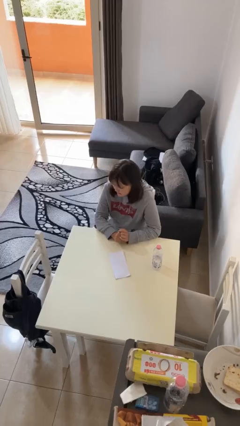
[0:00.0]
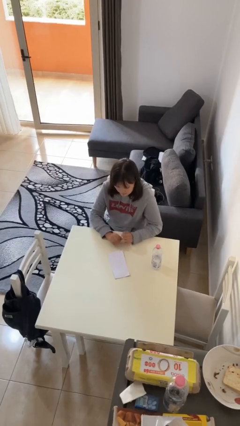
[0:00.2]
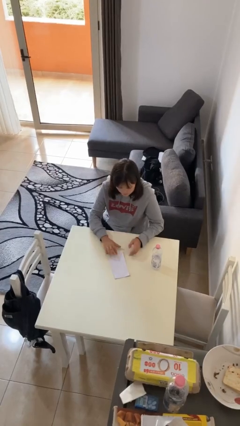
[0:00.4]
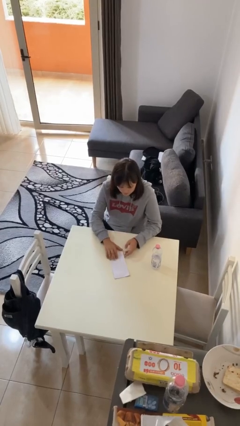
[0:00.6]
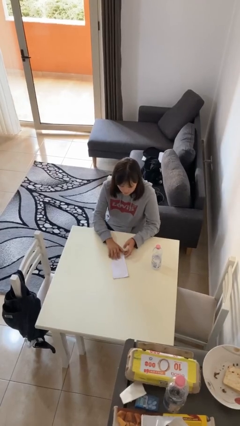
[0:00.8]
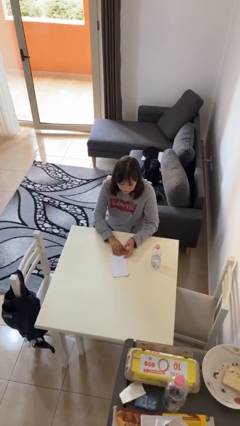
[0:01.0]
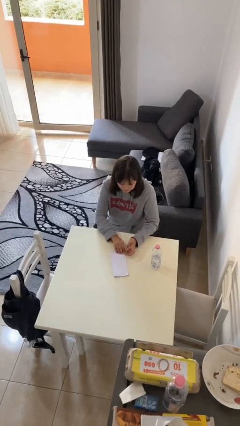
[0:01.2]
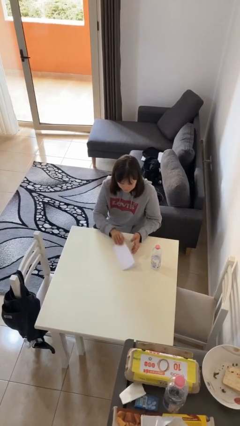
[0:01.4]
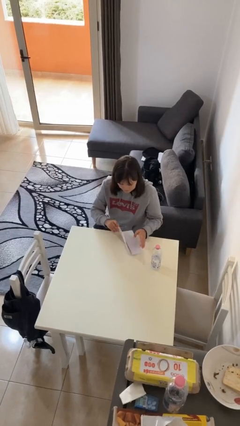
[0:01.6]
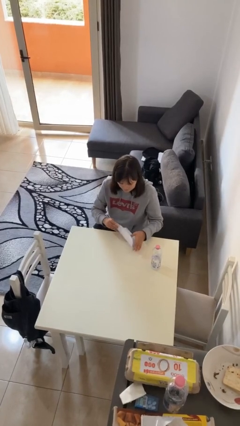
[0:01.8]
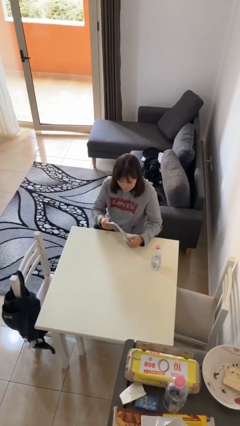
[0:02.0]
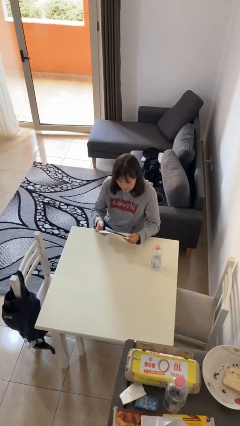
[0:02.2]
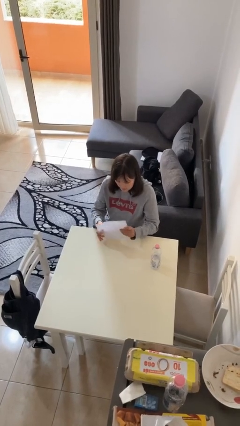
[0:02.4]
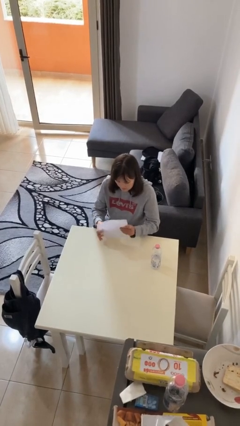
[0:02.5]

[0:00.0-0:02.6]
person picks up object from table

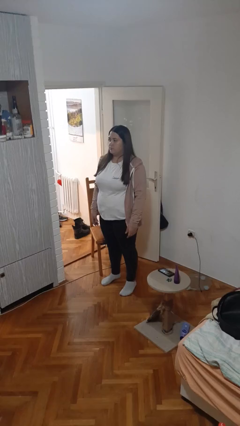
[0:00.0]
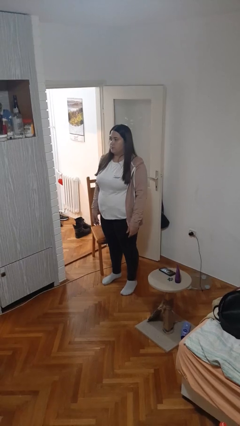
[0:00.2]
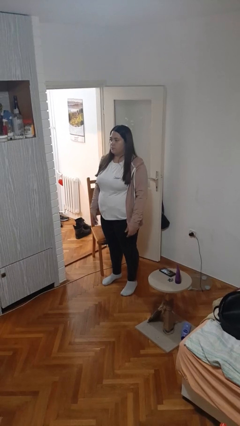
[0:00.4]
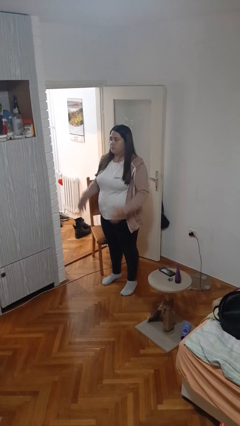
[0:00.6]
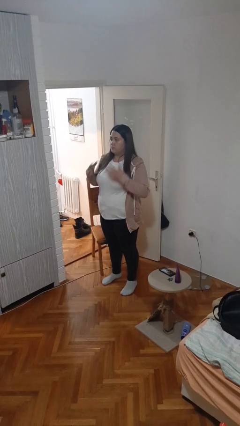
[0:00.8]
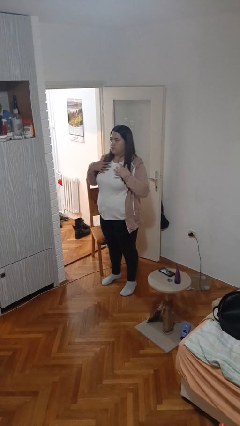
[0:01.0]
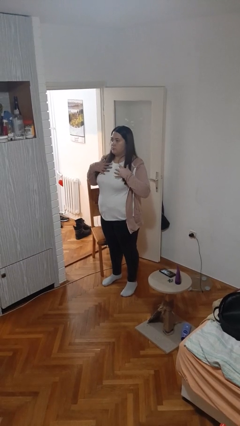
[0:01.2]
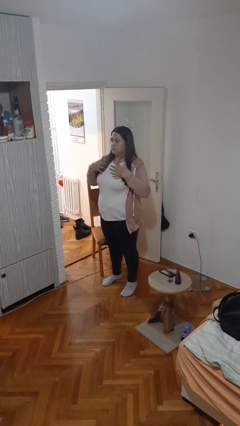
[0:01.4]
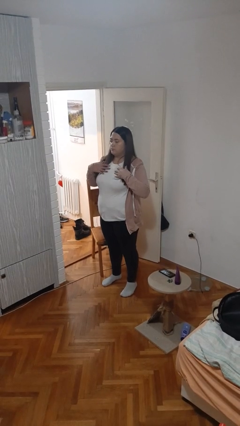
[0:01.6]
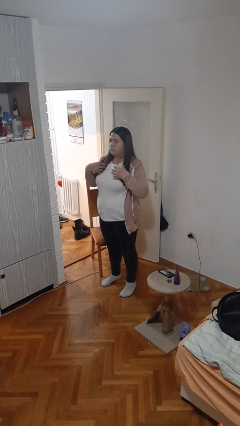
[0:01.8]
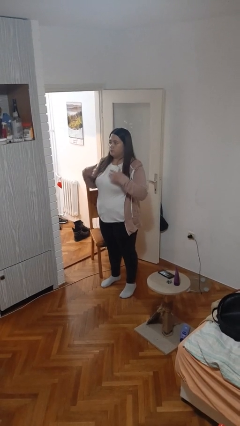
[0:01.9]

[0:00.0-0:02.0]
person drums on chest

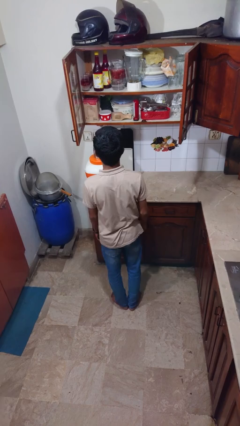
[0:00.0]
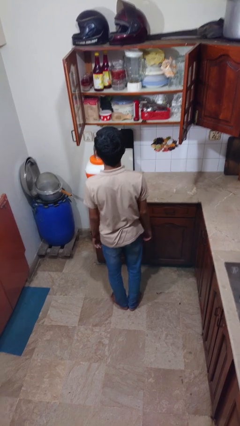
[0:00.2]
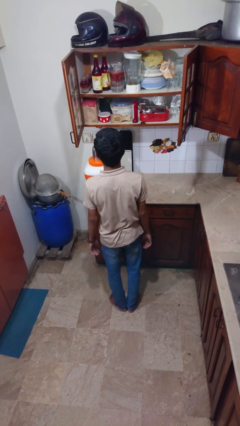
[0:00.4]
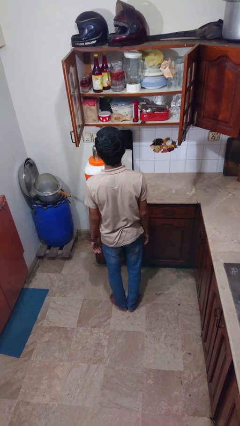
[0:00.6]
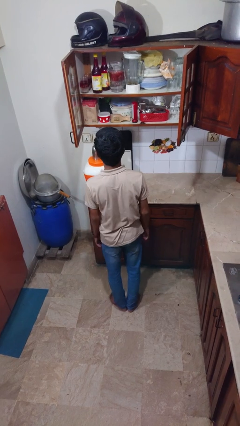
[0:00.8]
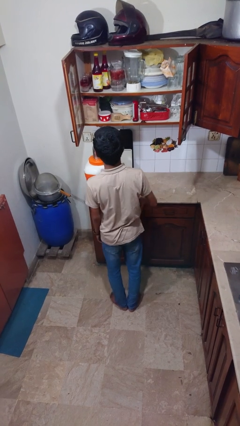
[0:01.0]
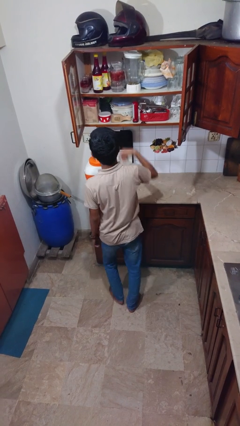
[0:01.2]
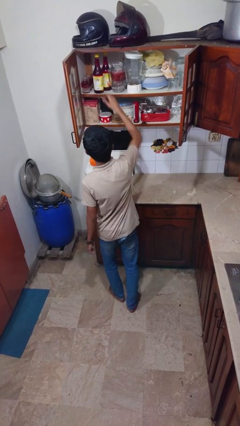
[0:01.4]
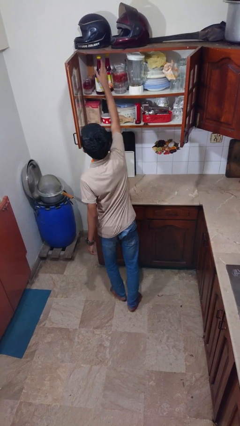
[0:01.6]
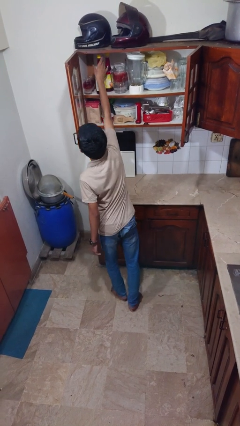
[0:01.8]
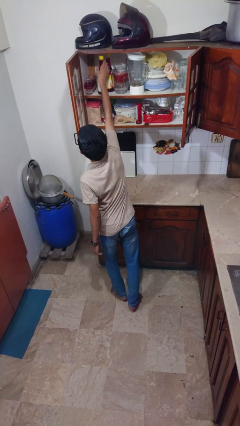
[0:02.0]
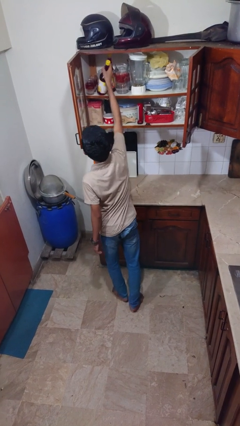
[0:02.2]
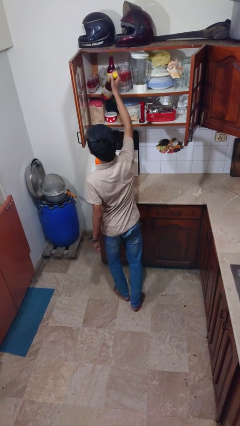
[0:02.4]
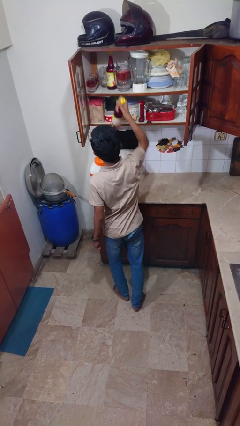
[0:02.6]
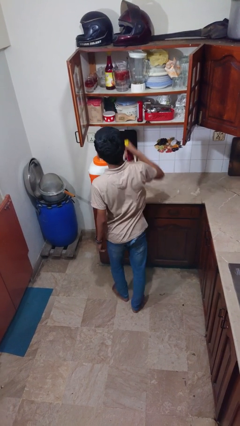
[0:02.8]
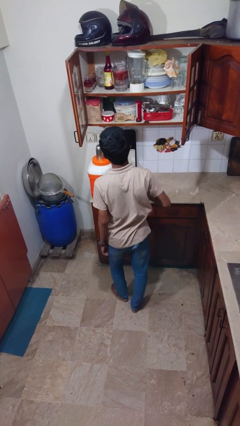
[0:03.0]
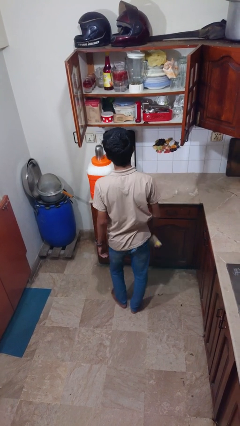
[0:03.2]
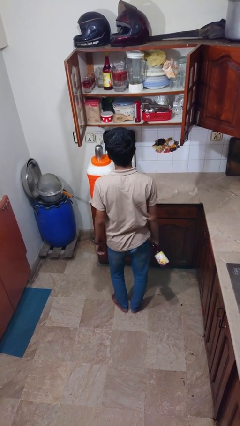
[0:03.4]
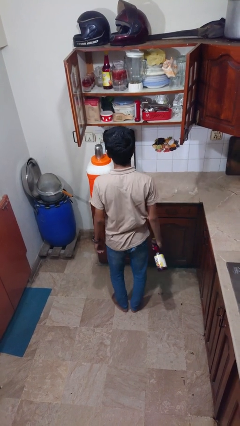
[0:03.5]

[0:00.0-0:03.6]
person picks up object from cabinet

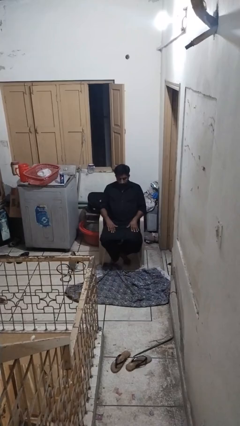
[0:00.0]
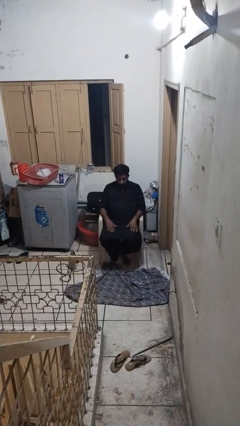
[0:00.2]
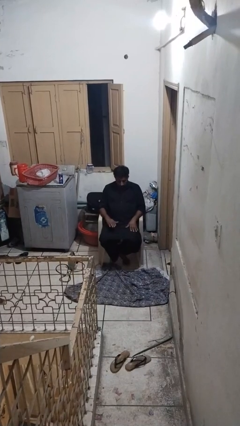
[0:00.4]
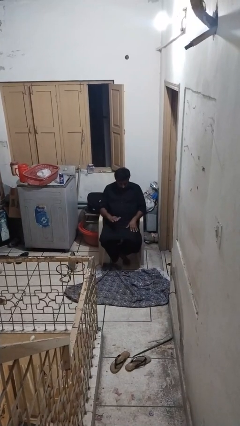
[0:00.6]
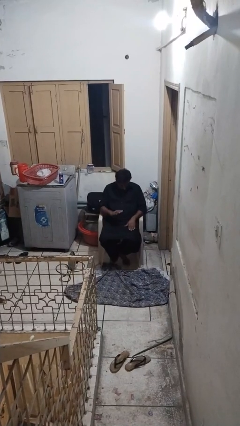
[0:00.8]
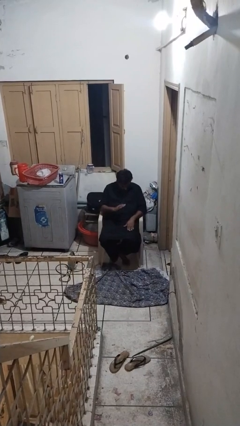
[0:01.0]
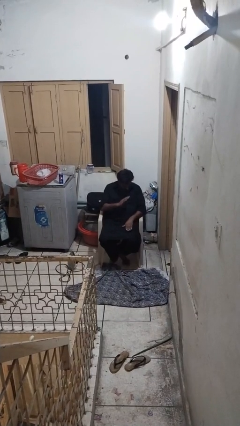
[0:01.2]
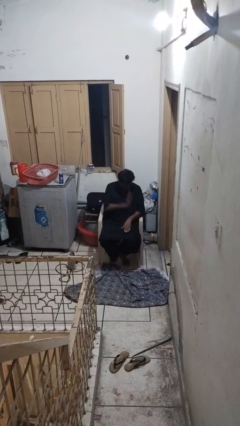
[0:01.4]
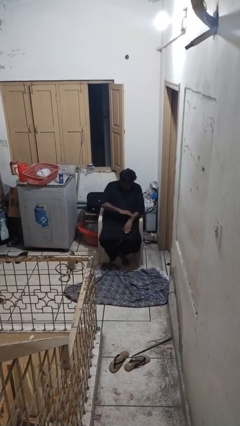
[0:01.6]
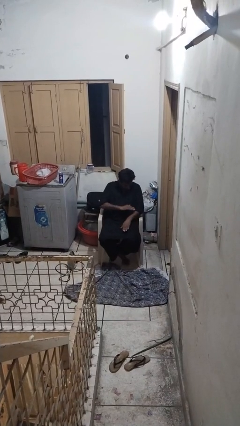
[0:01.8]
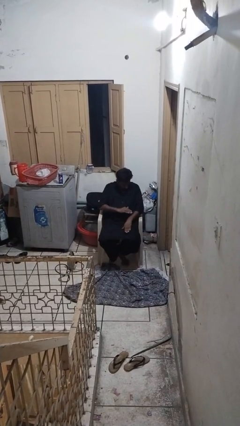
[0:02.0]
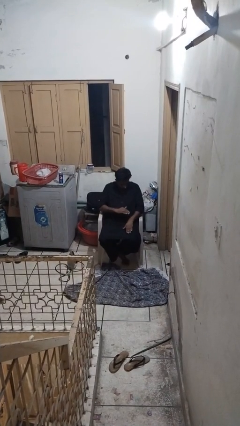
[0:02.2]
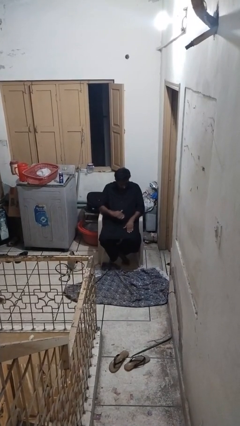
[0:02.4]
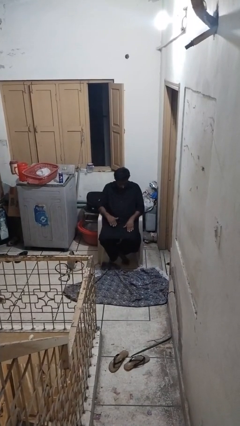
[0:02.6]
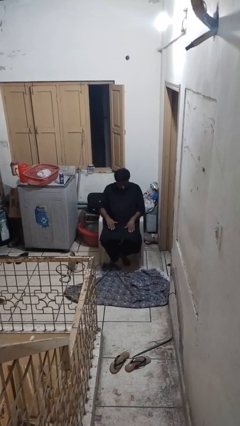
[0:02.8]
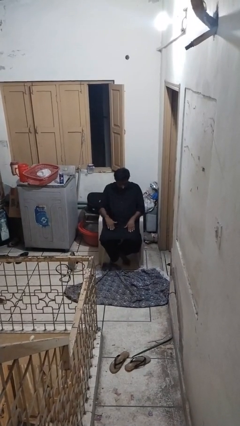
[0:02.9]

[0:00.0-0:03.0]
person swats bug

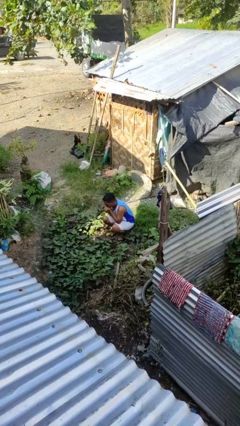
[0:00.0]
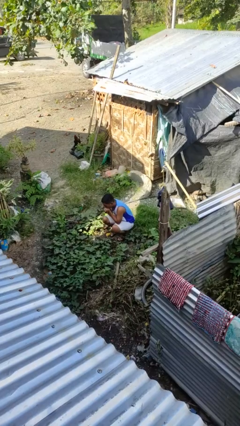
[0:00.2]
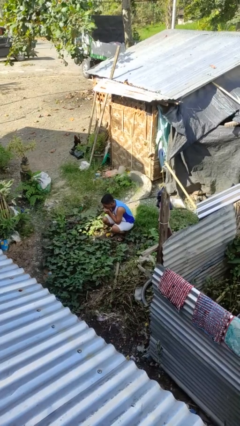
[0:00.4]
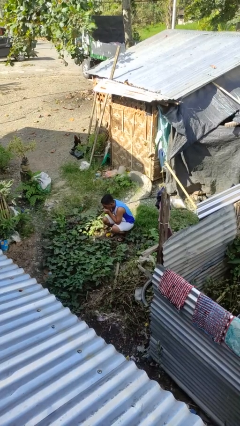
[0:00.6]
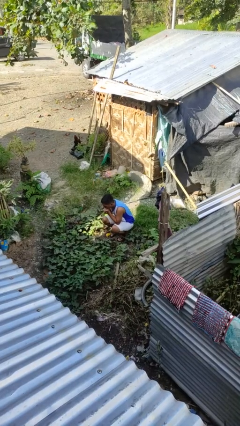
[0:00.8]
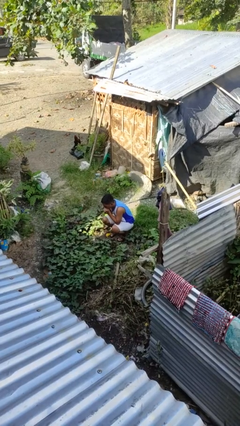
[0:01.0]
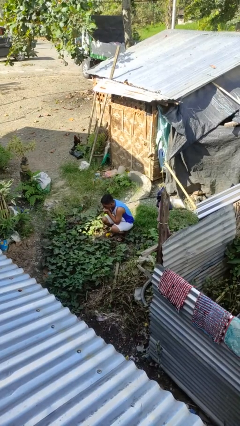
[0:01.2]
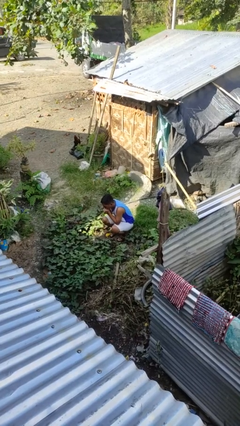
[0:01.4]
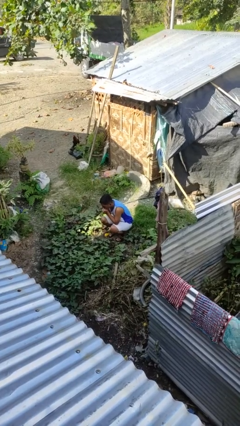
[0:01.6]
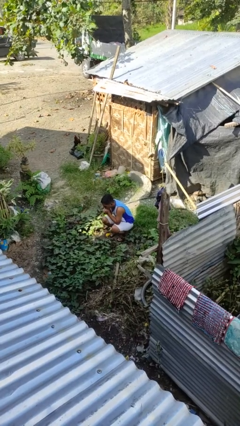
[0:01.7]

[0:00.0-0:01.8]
person blows into hands

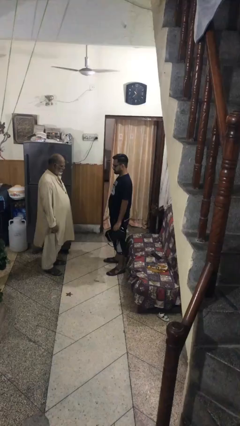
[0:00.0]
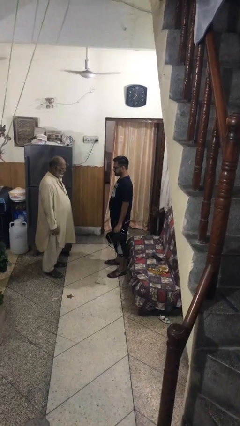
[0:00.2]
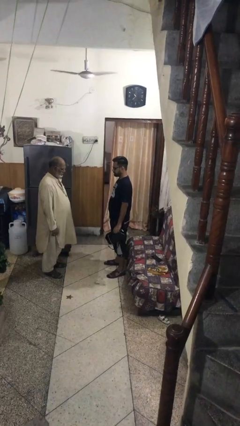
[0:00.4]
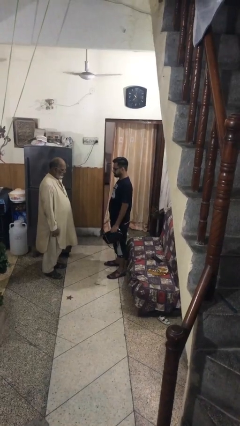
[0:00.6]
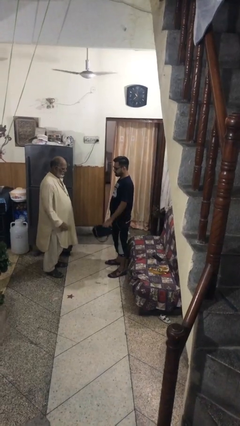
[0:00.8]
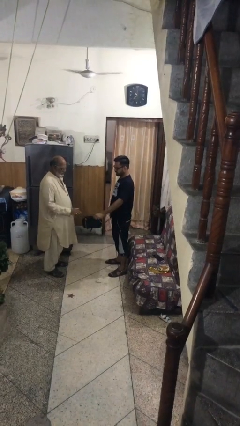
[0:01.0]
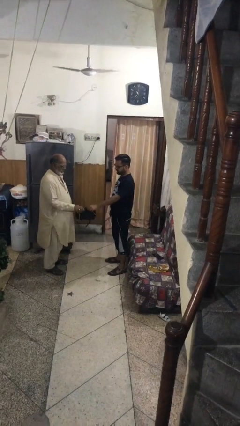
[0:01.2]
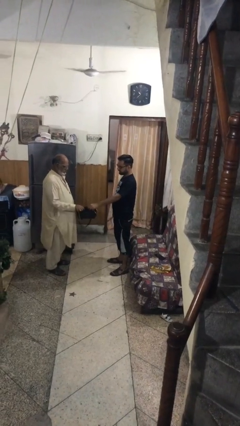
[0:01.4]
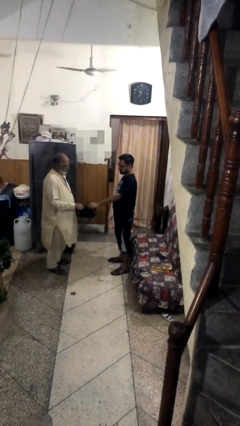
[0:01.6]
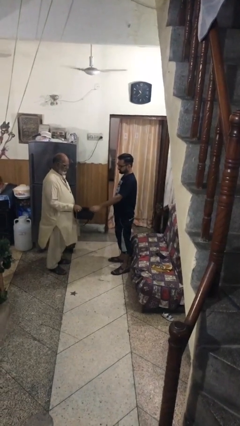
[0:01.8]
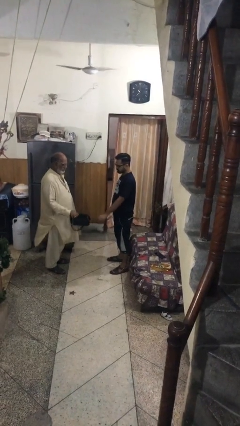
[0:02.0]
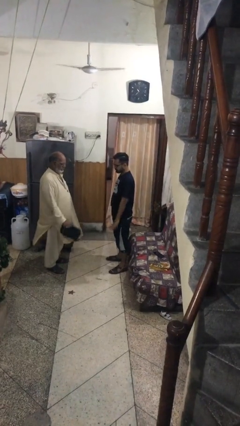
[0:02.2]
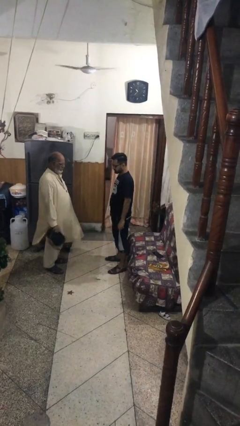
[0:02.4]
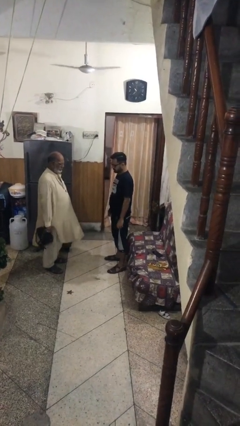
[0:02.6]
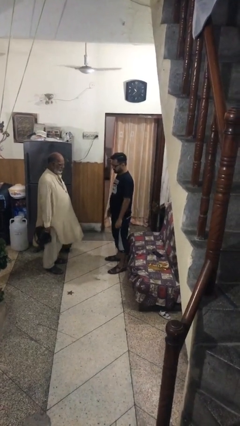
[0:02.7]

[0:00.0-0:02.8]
person transfers object to person

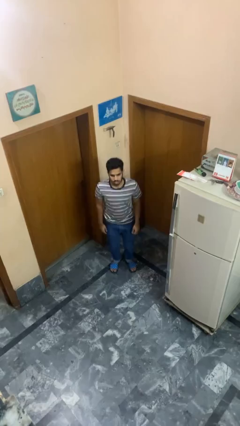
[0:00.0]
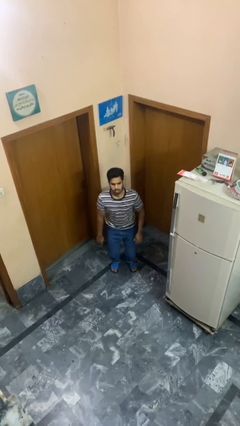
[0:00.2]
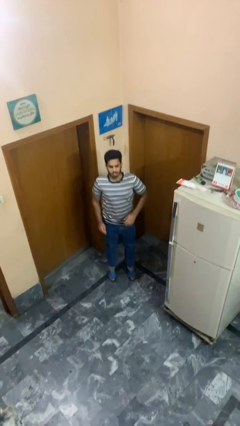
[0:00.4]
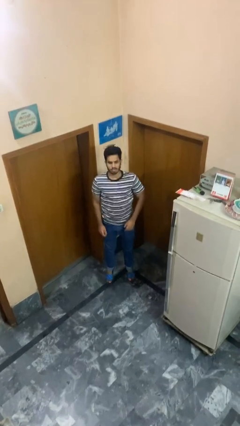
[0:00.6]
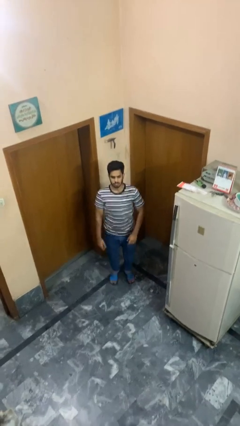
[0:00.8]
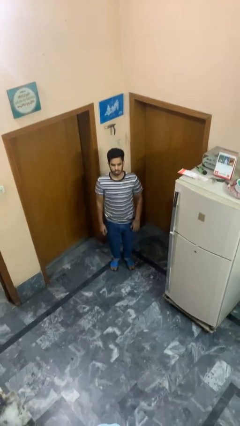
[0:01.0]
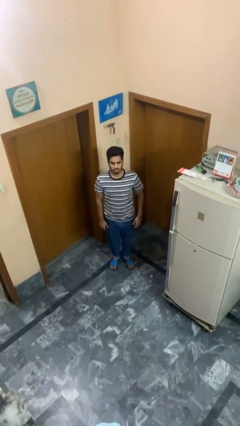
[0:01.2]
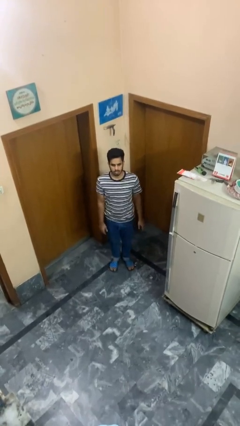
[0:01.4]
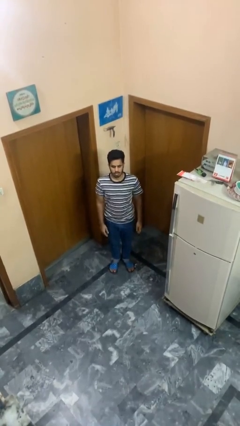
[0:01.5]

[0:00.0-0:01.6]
person jumps
